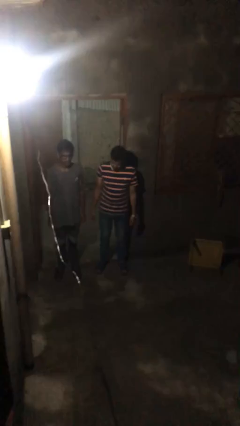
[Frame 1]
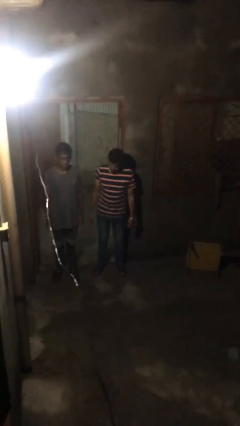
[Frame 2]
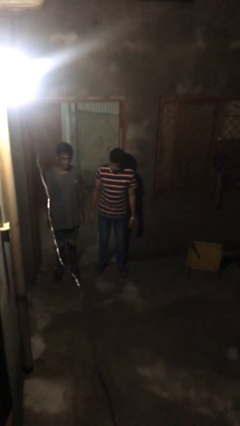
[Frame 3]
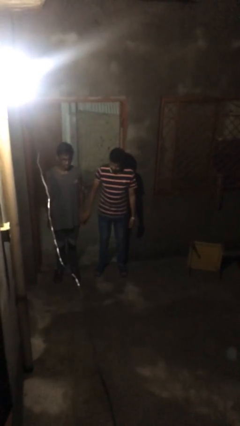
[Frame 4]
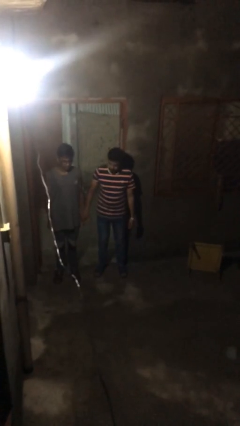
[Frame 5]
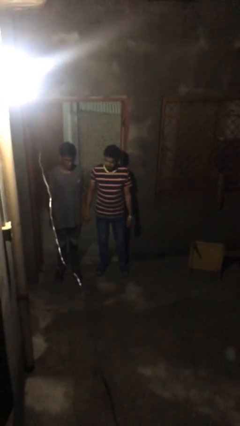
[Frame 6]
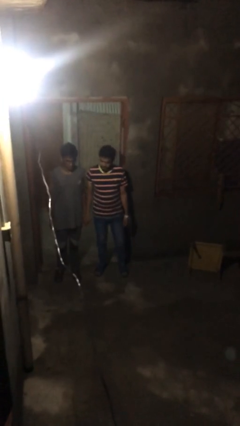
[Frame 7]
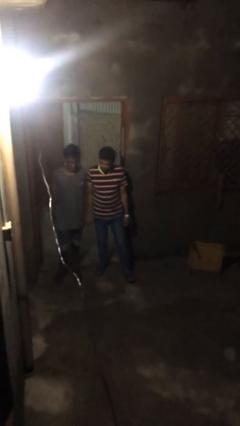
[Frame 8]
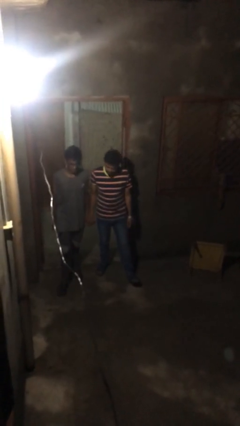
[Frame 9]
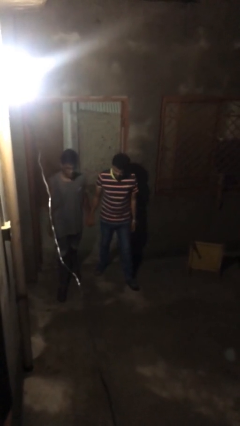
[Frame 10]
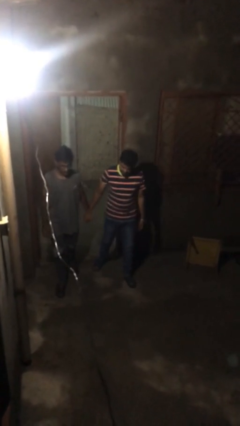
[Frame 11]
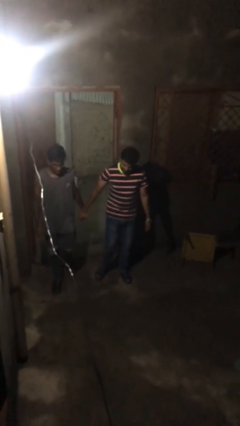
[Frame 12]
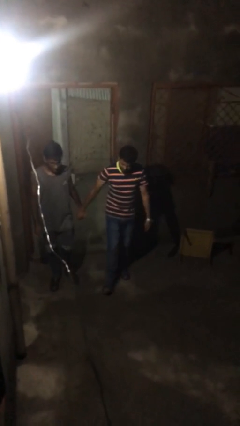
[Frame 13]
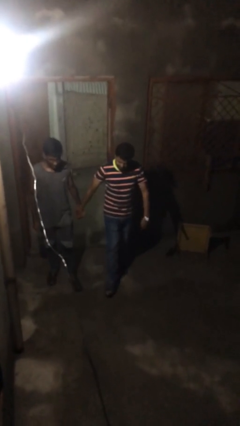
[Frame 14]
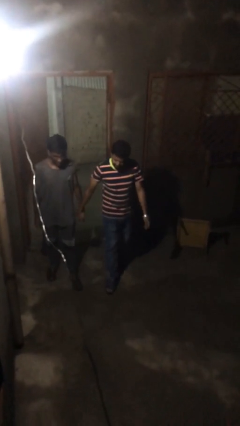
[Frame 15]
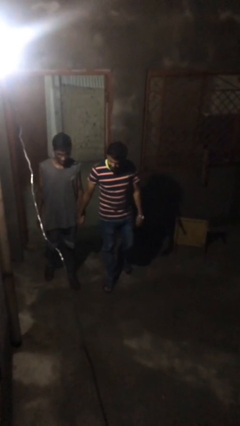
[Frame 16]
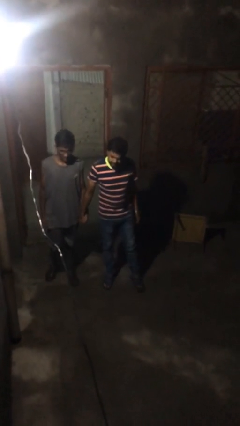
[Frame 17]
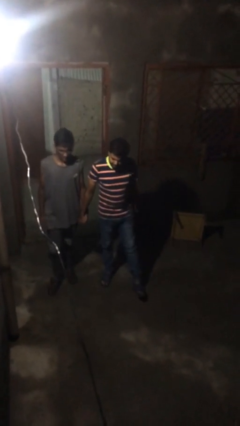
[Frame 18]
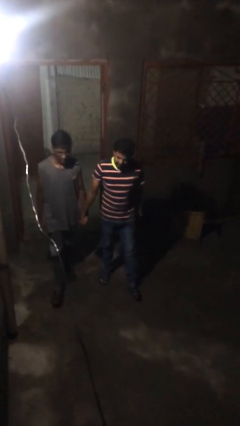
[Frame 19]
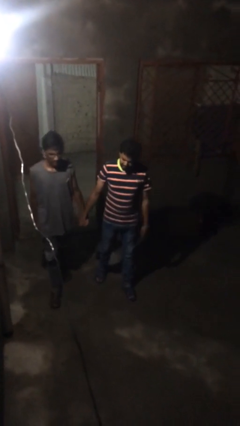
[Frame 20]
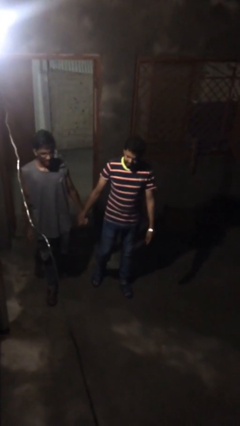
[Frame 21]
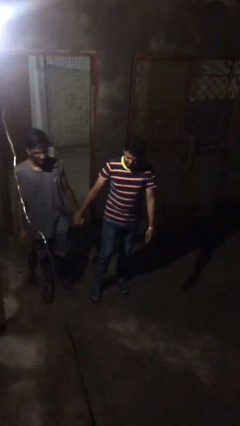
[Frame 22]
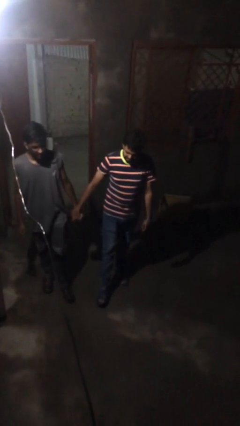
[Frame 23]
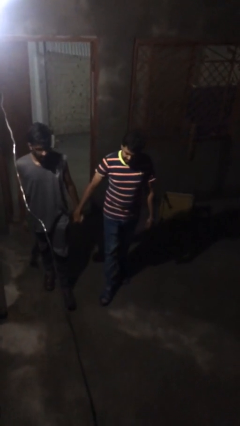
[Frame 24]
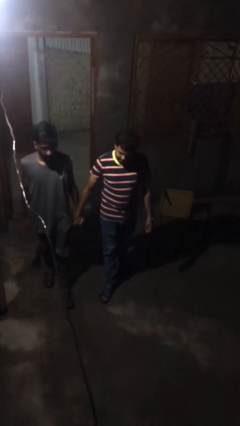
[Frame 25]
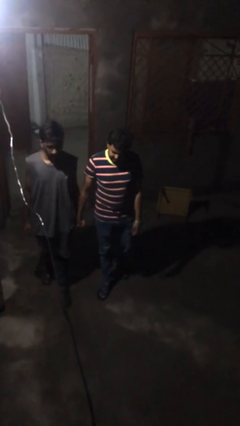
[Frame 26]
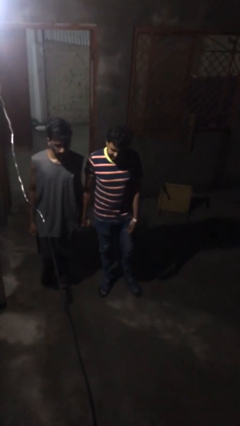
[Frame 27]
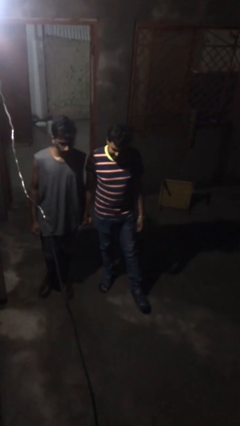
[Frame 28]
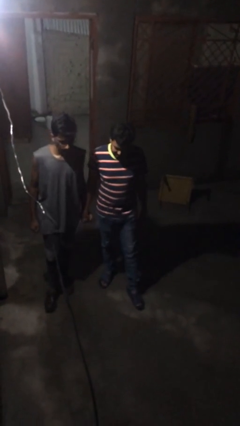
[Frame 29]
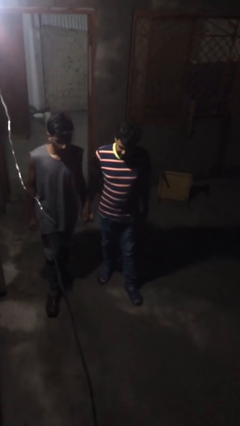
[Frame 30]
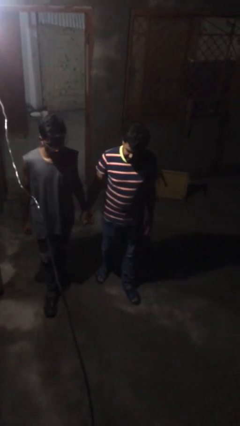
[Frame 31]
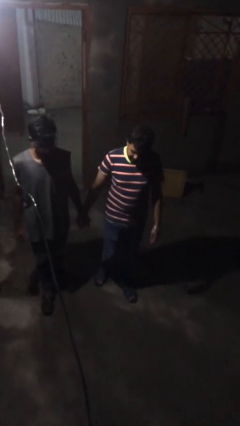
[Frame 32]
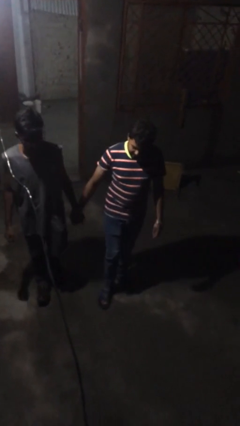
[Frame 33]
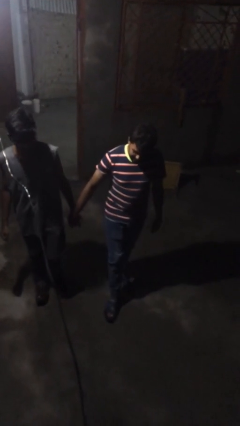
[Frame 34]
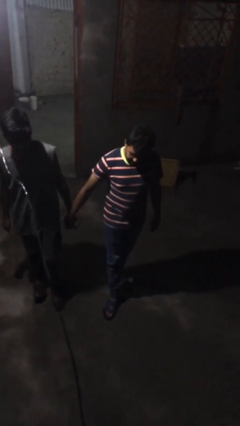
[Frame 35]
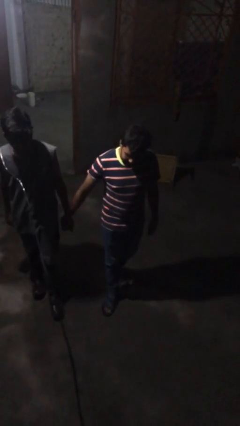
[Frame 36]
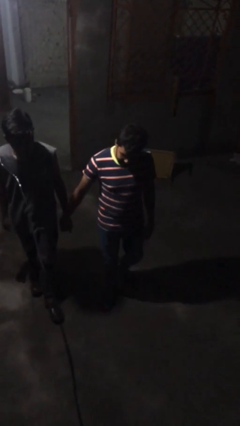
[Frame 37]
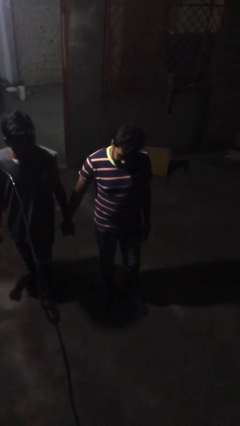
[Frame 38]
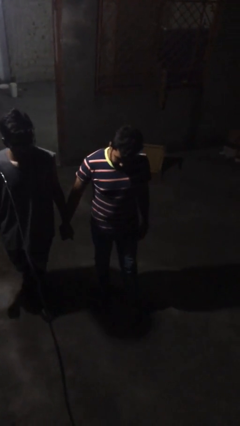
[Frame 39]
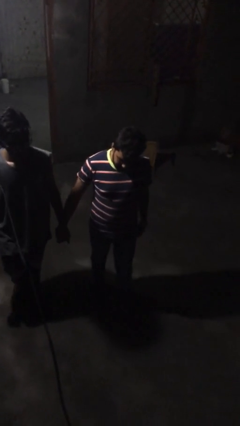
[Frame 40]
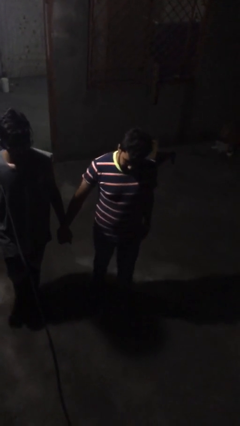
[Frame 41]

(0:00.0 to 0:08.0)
person holds hand

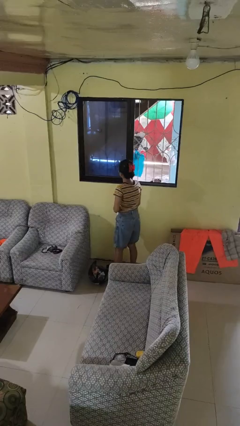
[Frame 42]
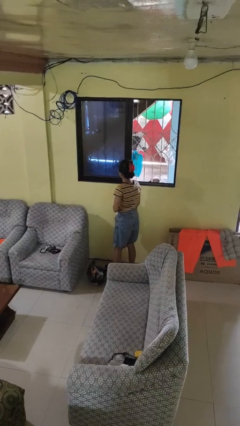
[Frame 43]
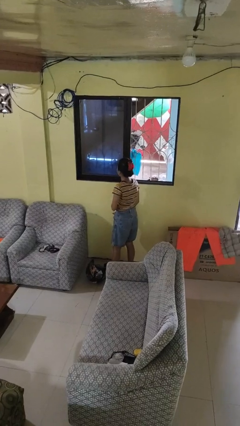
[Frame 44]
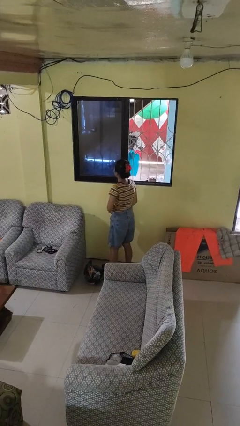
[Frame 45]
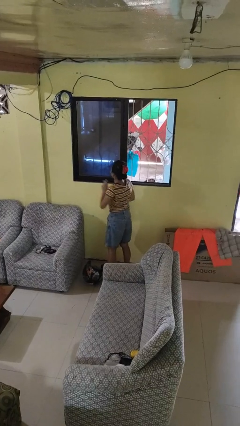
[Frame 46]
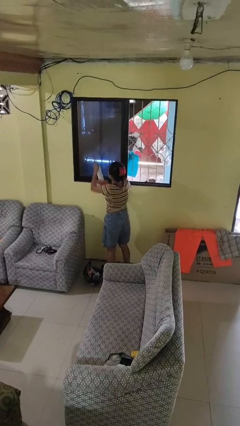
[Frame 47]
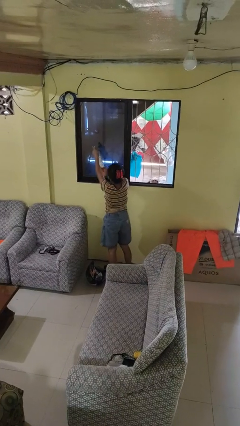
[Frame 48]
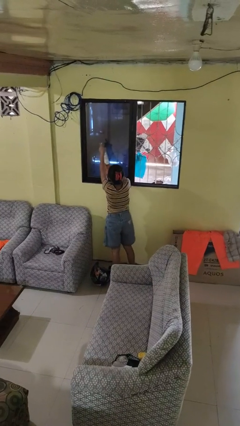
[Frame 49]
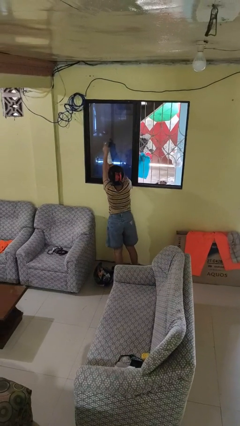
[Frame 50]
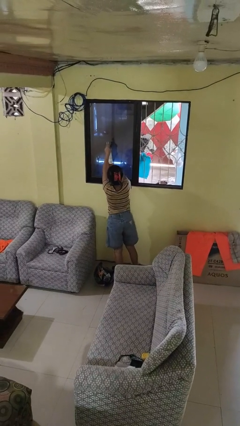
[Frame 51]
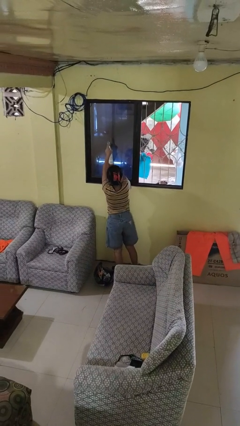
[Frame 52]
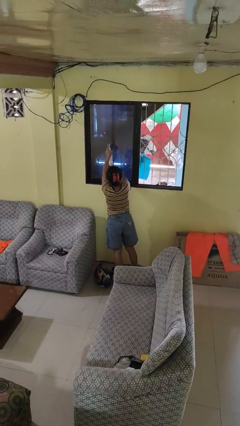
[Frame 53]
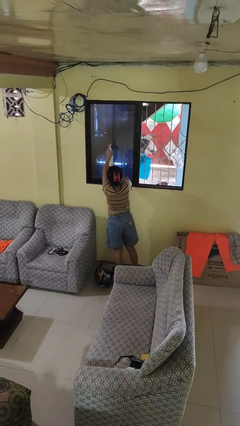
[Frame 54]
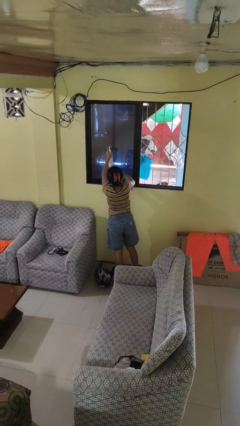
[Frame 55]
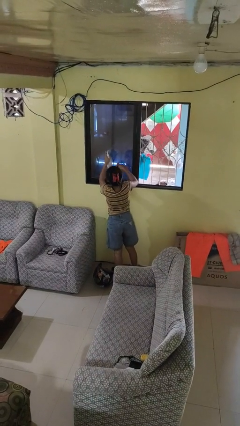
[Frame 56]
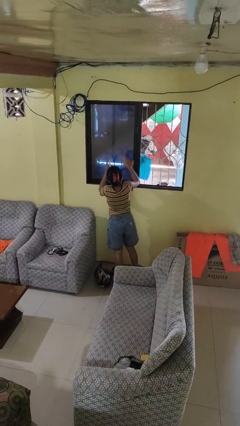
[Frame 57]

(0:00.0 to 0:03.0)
person sprays from bottle

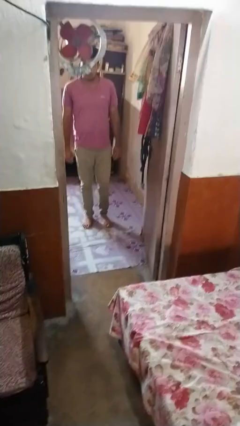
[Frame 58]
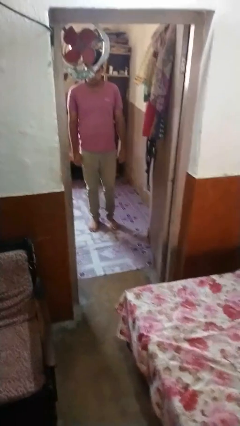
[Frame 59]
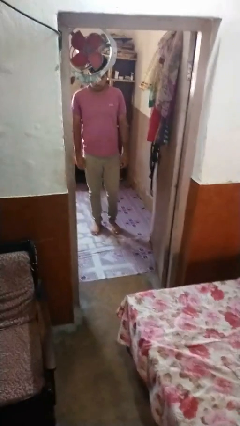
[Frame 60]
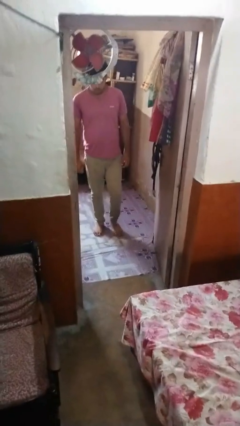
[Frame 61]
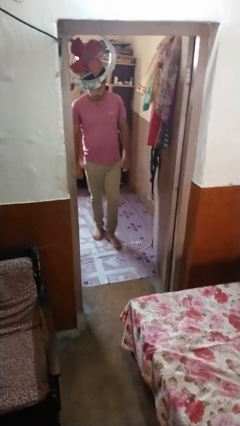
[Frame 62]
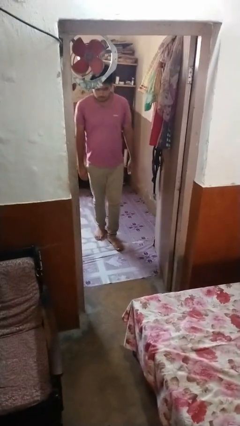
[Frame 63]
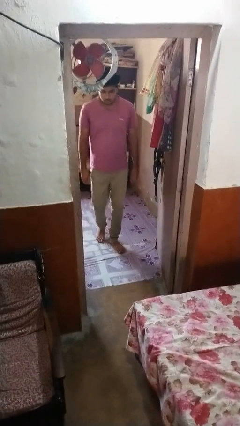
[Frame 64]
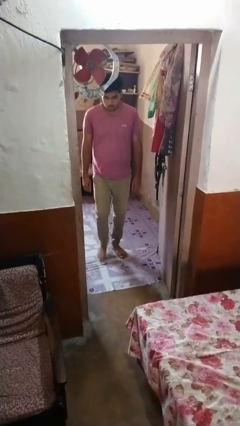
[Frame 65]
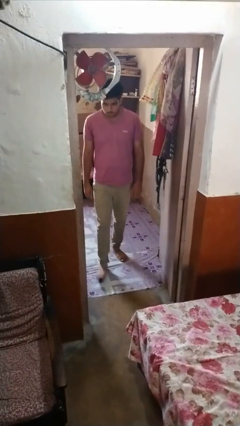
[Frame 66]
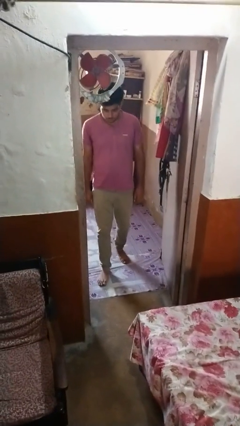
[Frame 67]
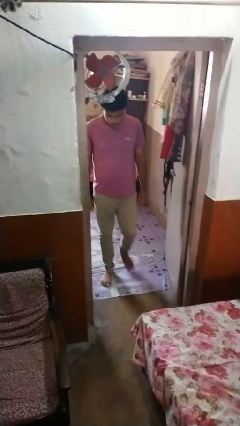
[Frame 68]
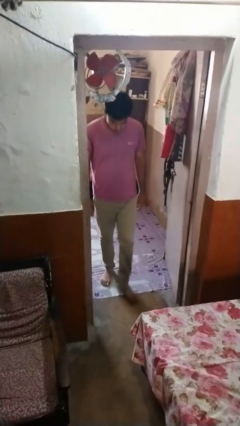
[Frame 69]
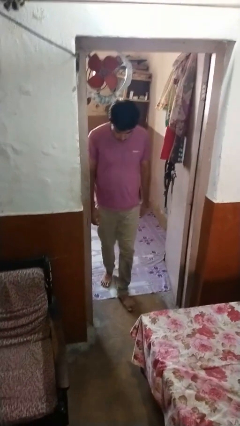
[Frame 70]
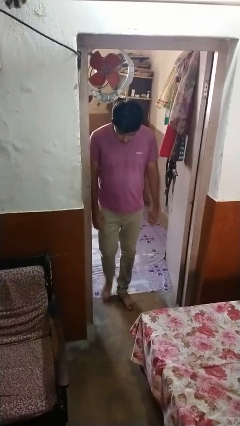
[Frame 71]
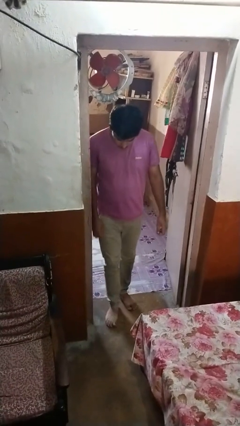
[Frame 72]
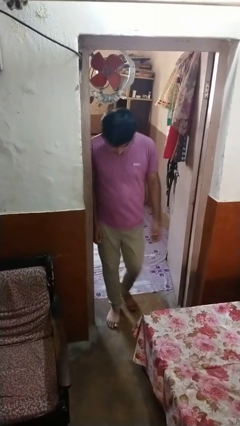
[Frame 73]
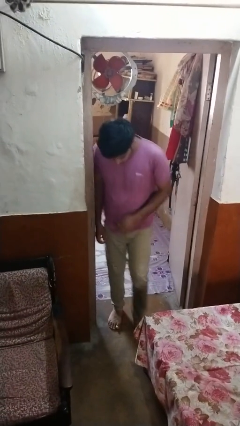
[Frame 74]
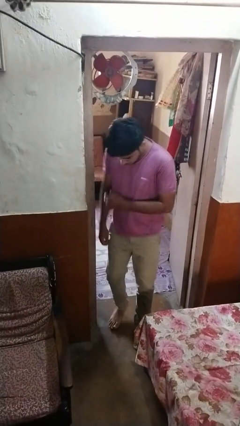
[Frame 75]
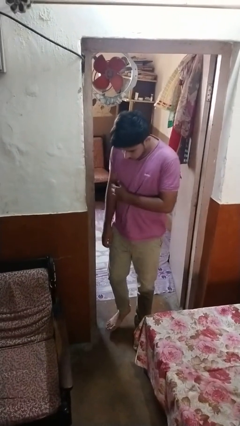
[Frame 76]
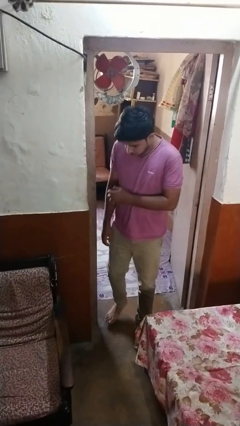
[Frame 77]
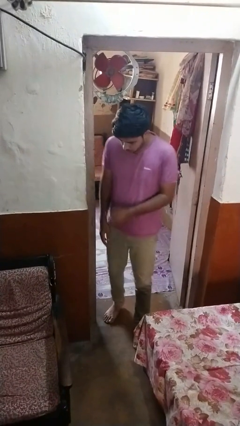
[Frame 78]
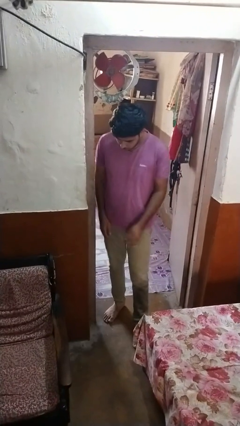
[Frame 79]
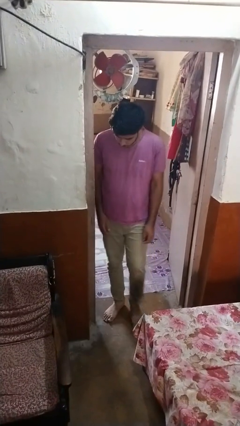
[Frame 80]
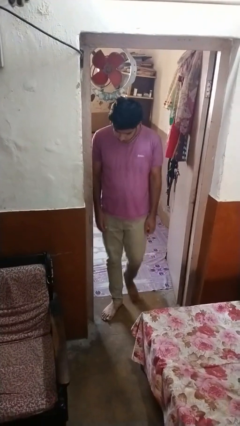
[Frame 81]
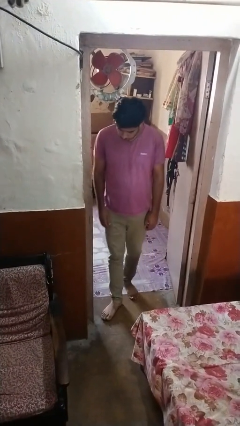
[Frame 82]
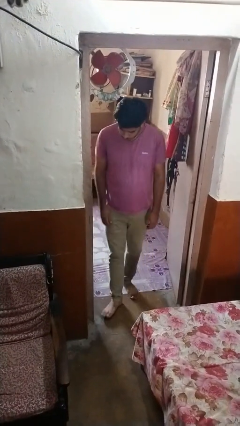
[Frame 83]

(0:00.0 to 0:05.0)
person bumps into wall

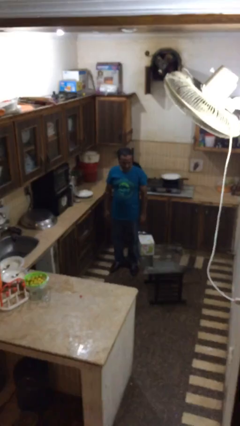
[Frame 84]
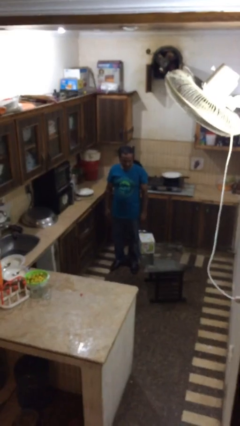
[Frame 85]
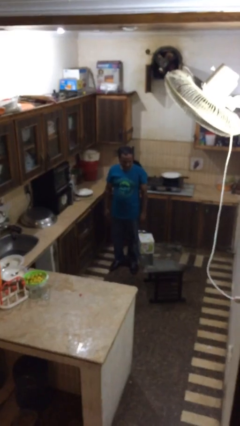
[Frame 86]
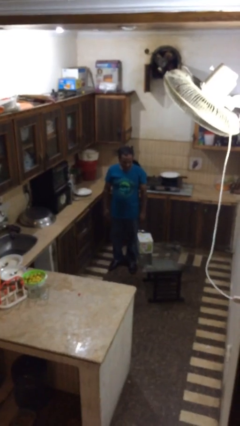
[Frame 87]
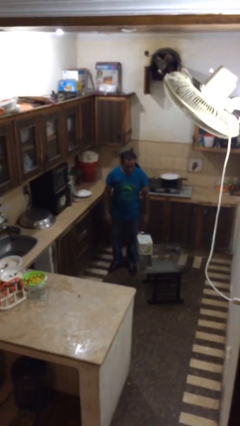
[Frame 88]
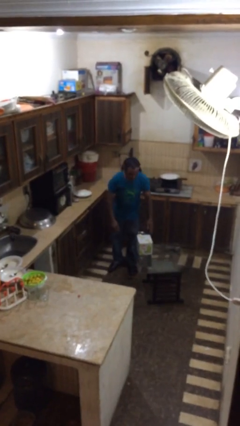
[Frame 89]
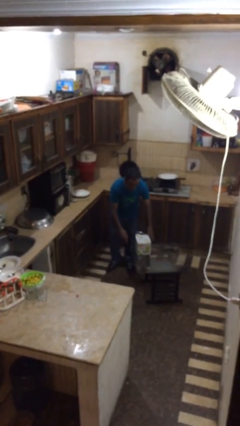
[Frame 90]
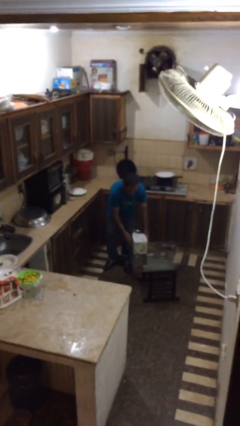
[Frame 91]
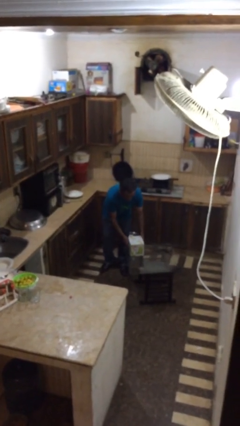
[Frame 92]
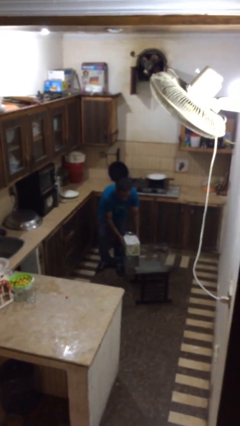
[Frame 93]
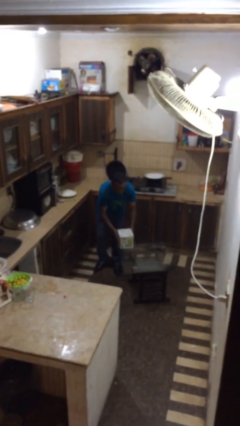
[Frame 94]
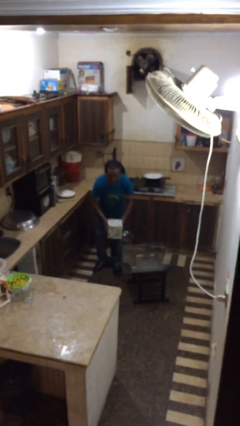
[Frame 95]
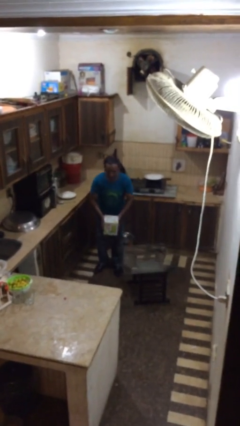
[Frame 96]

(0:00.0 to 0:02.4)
person picks up object from table
